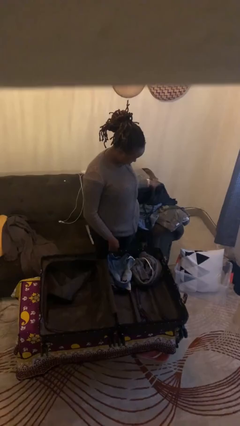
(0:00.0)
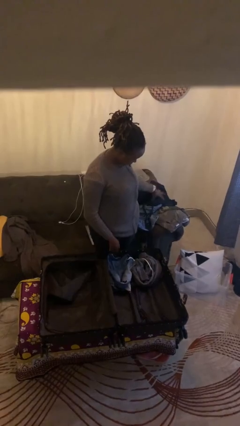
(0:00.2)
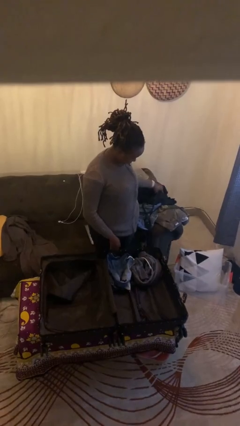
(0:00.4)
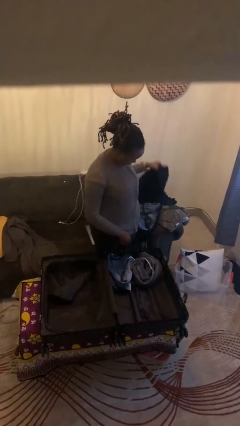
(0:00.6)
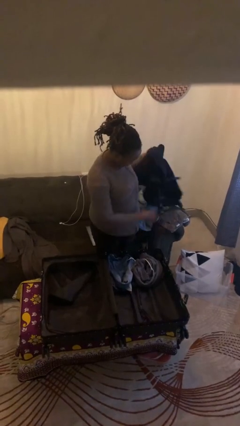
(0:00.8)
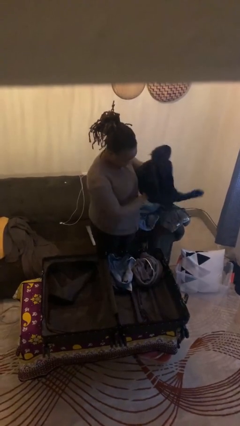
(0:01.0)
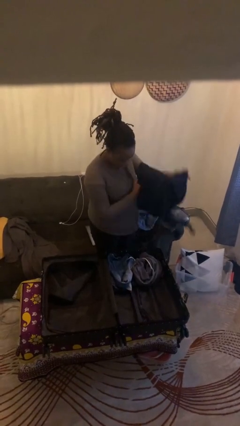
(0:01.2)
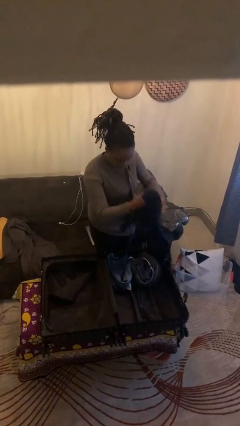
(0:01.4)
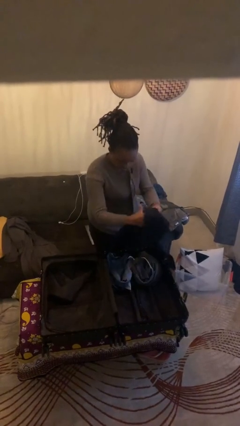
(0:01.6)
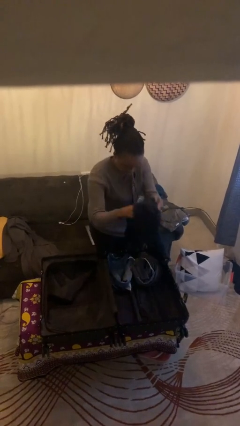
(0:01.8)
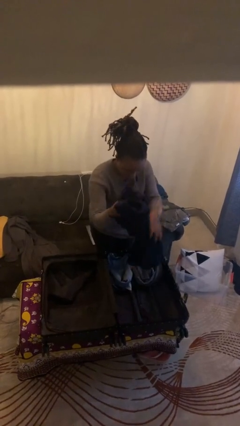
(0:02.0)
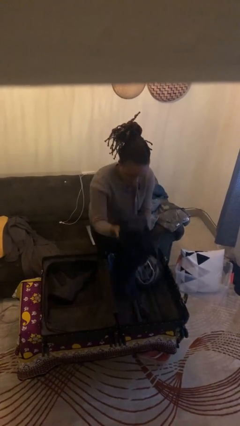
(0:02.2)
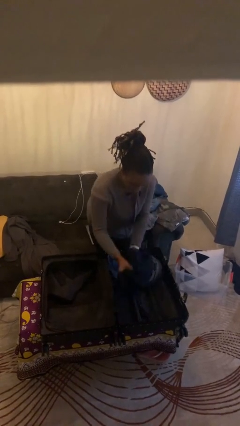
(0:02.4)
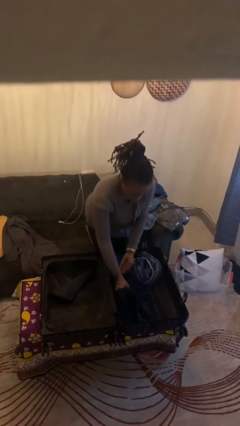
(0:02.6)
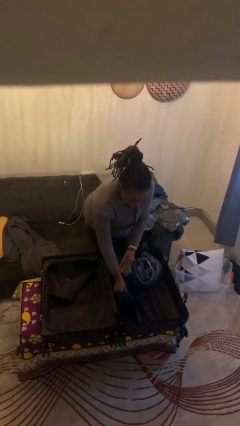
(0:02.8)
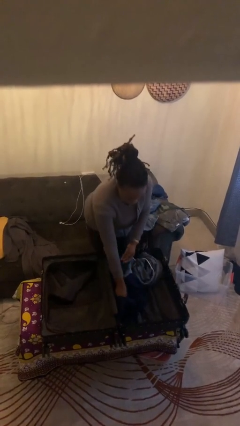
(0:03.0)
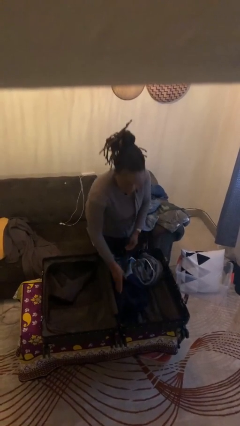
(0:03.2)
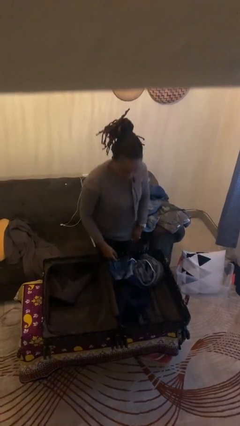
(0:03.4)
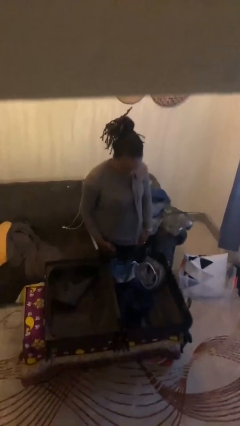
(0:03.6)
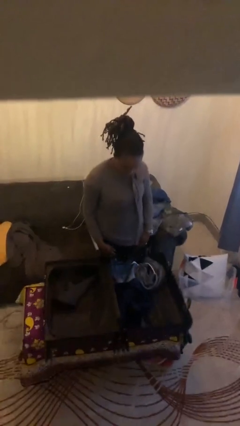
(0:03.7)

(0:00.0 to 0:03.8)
person loads clothes into suitcase

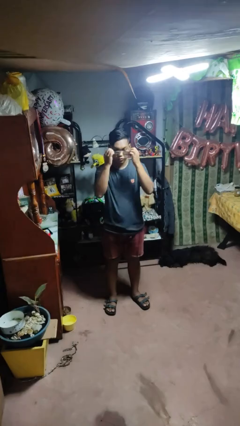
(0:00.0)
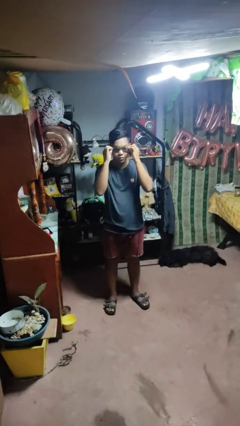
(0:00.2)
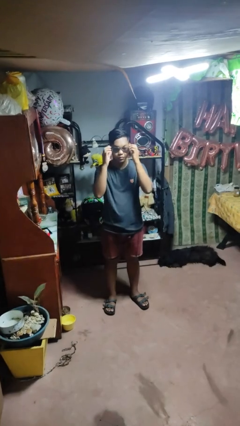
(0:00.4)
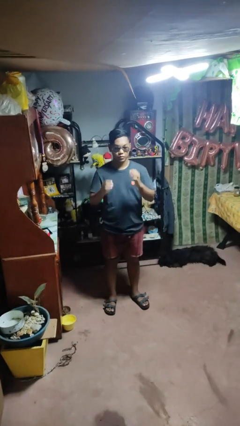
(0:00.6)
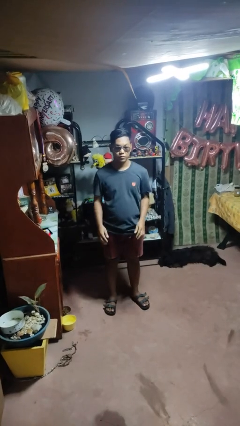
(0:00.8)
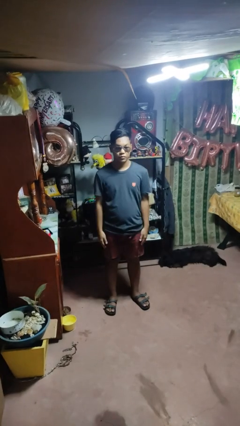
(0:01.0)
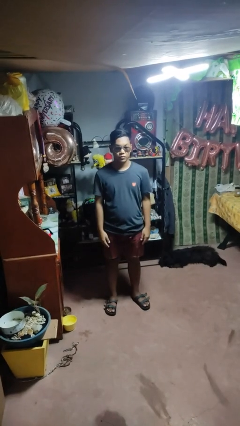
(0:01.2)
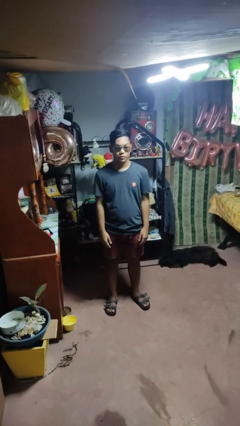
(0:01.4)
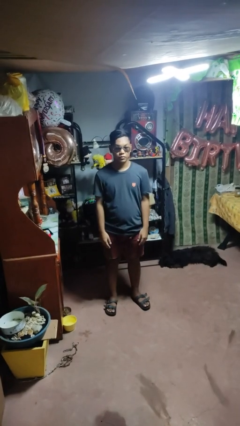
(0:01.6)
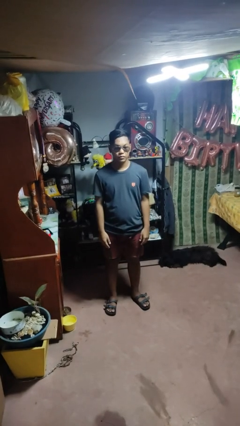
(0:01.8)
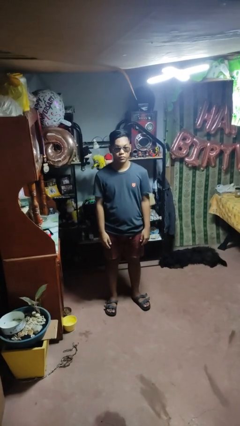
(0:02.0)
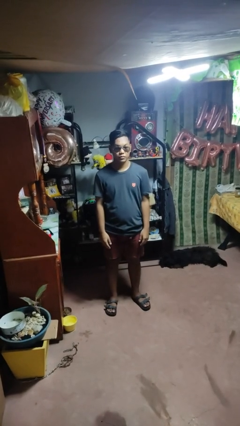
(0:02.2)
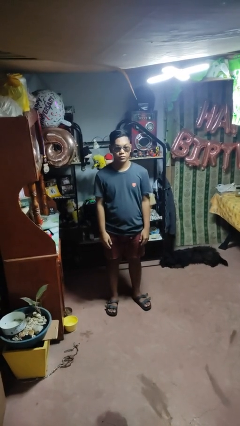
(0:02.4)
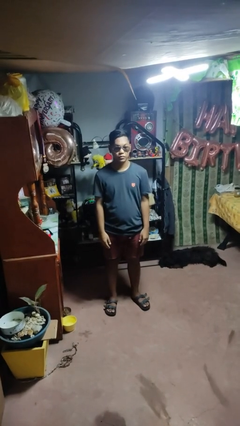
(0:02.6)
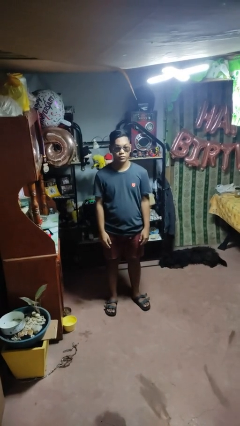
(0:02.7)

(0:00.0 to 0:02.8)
person puts on sunglasses

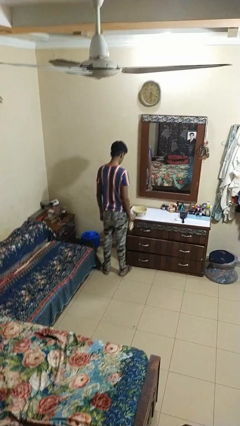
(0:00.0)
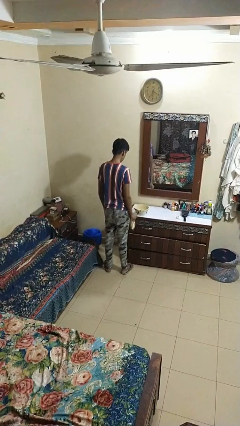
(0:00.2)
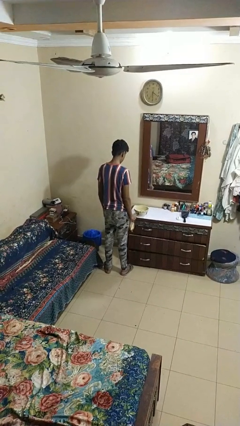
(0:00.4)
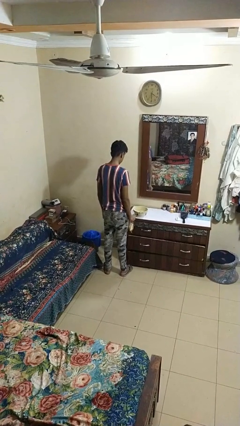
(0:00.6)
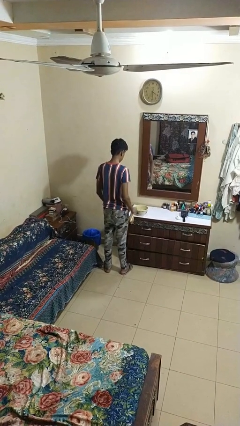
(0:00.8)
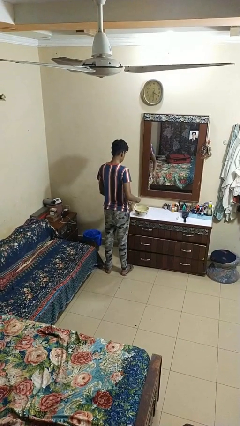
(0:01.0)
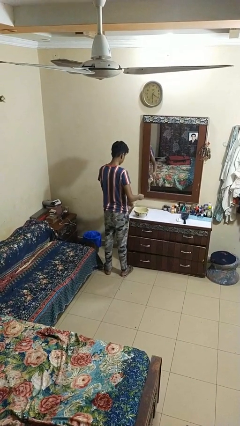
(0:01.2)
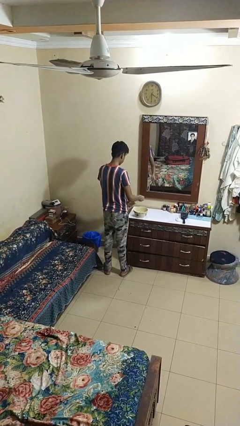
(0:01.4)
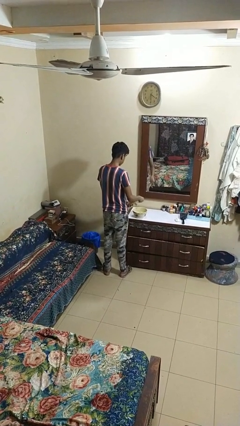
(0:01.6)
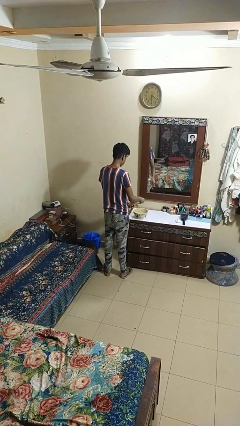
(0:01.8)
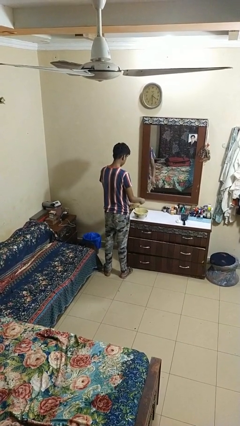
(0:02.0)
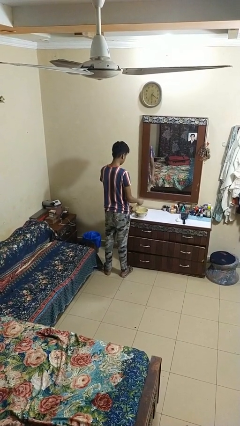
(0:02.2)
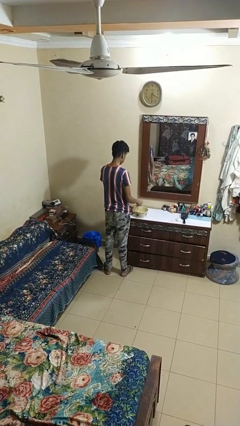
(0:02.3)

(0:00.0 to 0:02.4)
person pours into bowl

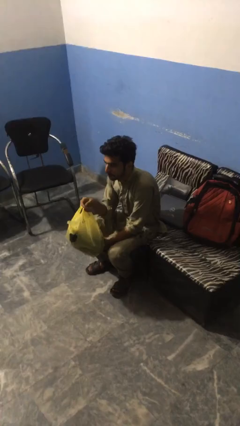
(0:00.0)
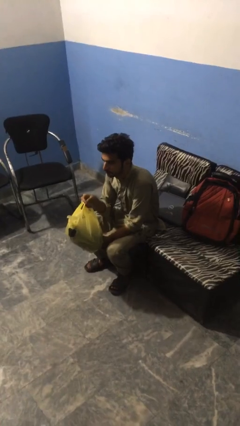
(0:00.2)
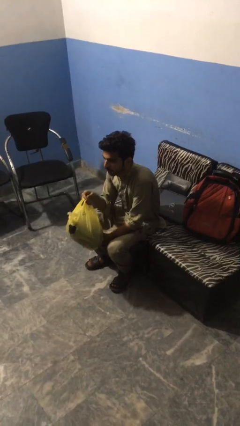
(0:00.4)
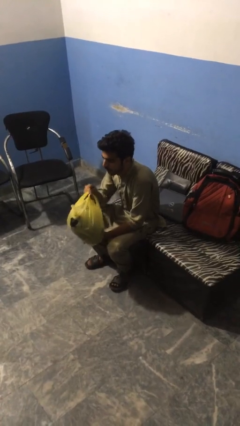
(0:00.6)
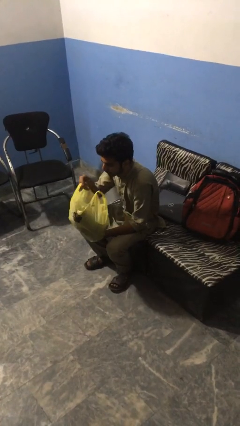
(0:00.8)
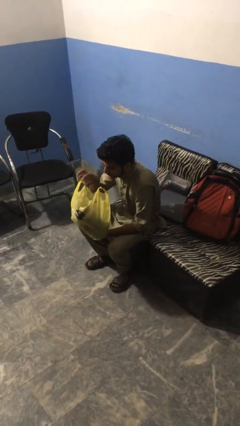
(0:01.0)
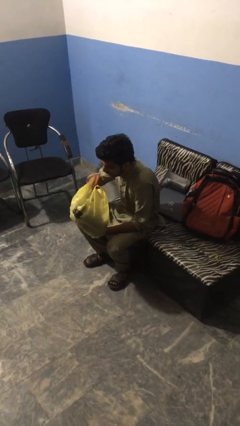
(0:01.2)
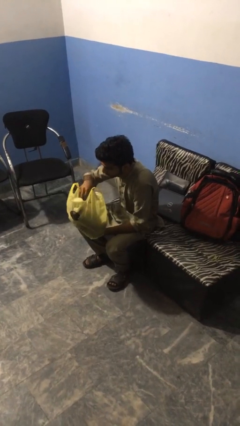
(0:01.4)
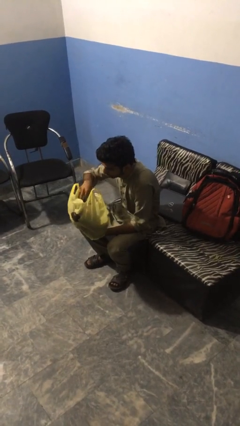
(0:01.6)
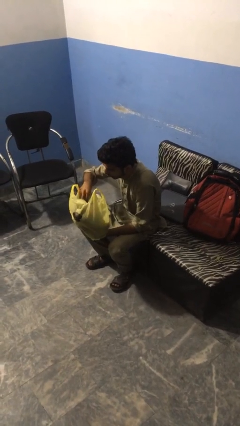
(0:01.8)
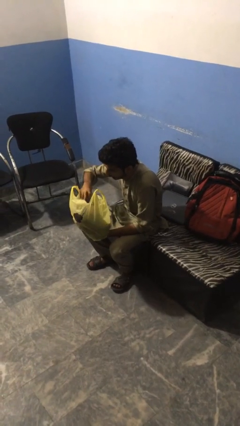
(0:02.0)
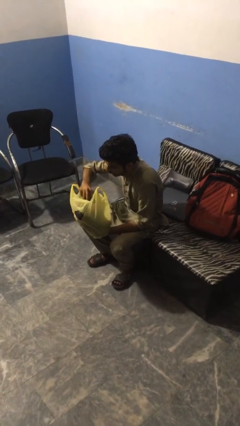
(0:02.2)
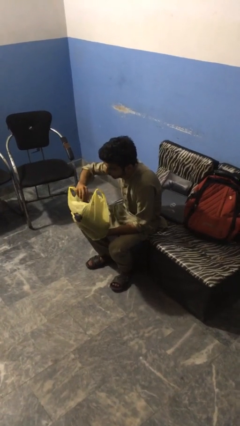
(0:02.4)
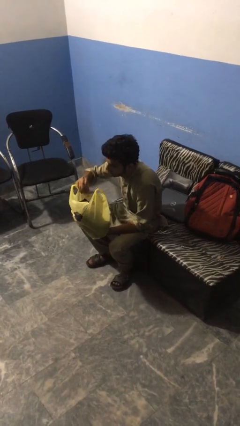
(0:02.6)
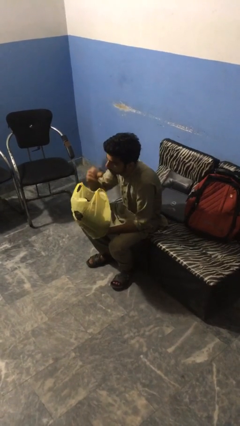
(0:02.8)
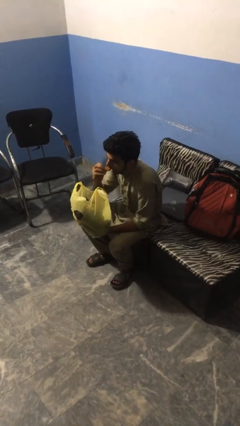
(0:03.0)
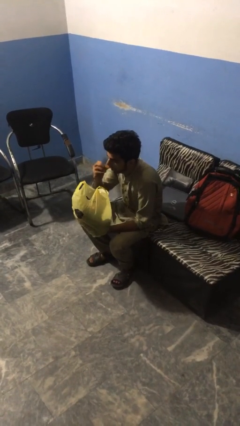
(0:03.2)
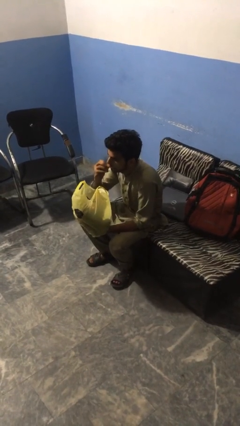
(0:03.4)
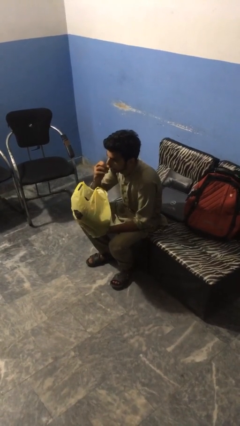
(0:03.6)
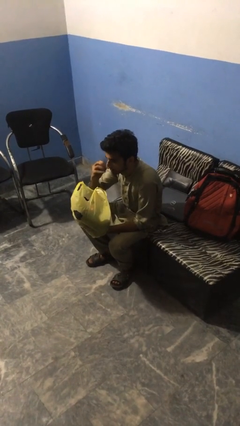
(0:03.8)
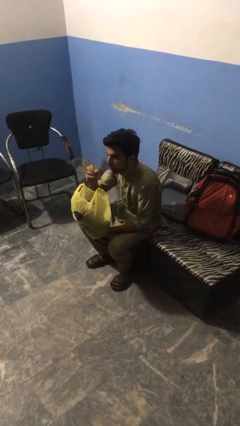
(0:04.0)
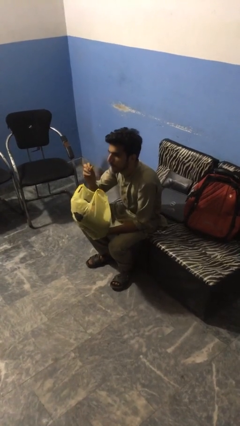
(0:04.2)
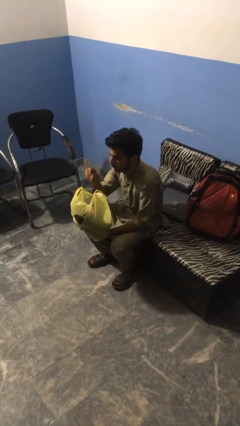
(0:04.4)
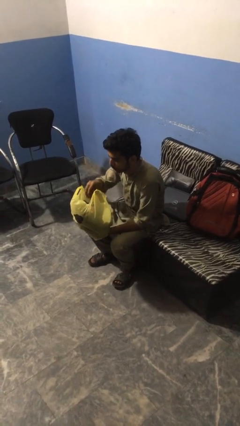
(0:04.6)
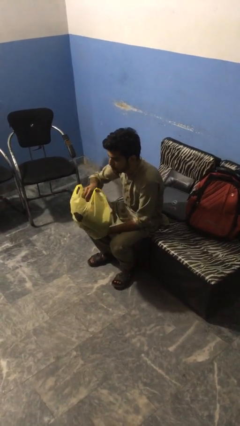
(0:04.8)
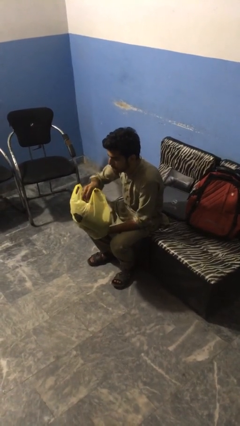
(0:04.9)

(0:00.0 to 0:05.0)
person eats snack from bag

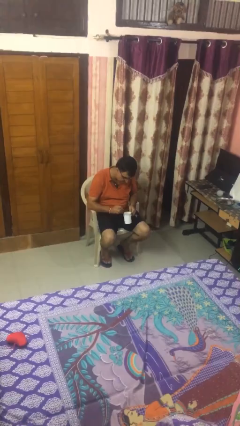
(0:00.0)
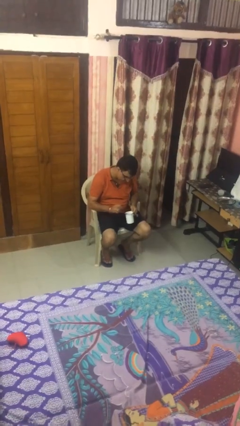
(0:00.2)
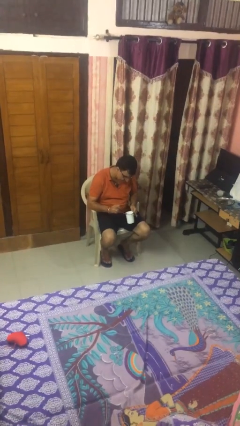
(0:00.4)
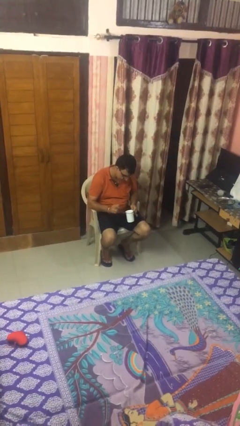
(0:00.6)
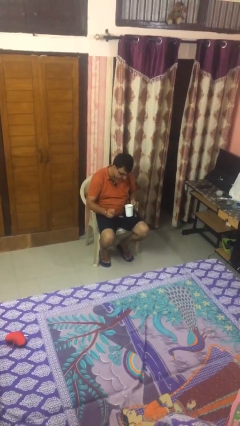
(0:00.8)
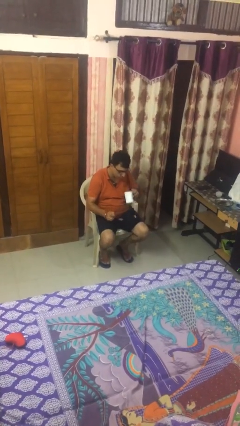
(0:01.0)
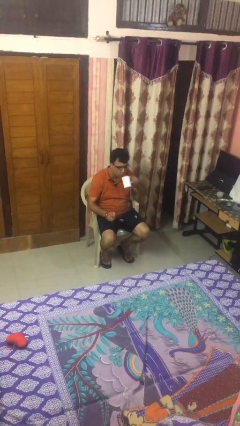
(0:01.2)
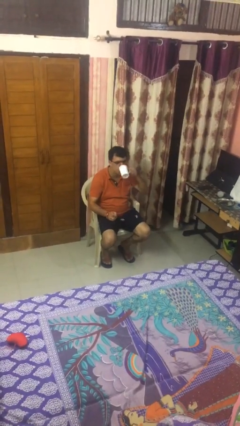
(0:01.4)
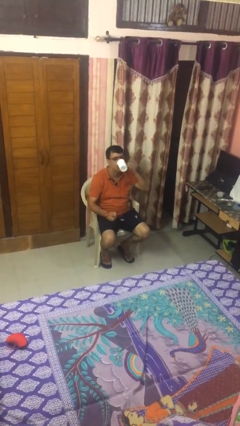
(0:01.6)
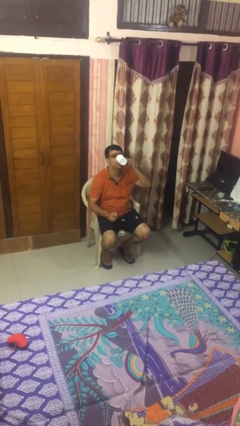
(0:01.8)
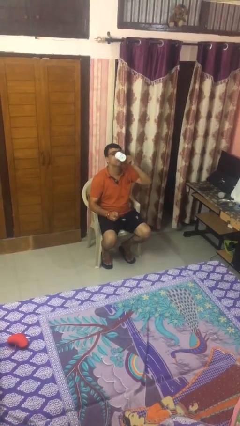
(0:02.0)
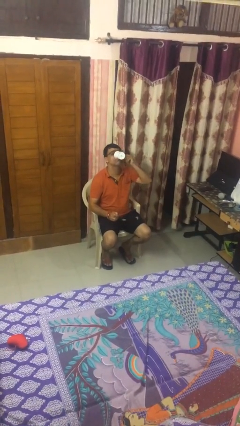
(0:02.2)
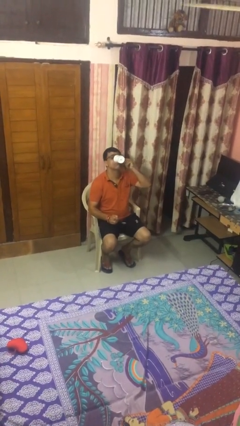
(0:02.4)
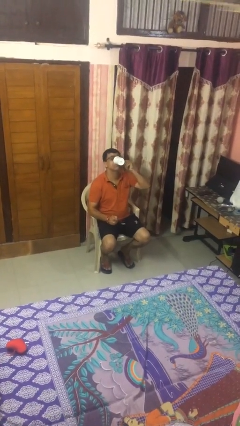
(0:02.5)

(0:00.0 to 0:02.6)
person drinks from mug

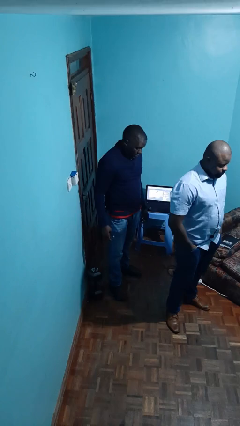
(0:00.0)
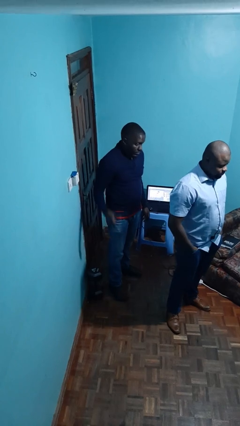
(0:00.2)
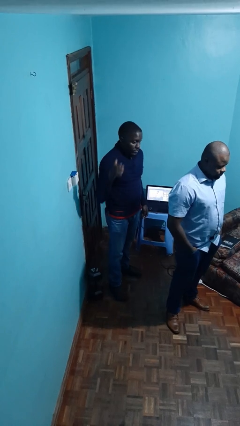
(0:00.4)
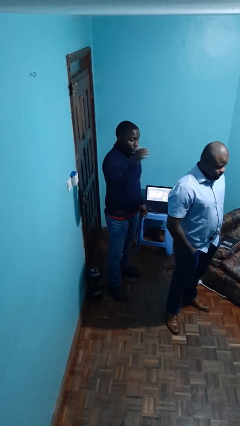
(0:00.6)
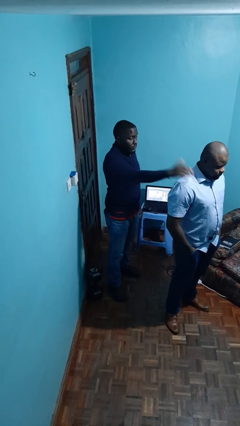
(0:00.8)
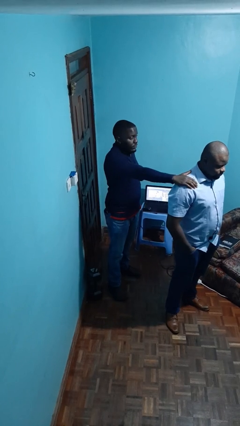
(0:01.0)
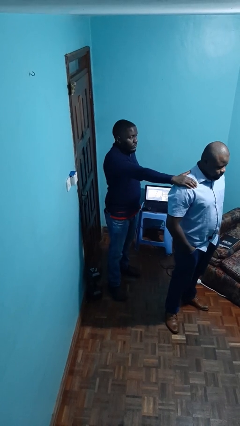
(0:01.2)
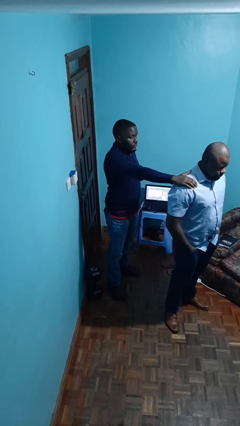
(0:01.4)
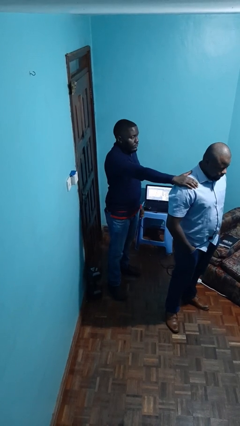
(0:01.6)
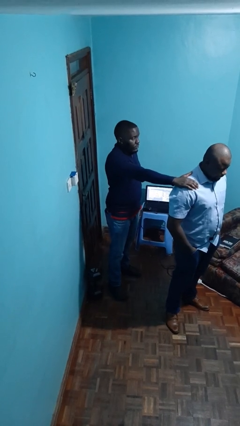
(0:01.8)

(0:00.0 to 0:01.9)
person grabs person by shoulder
